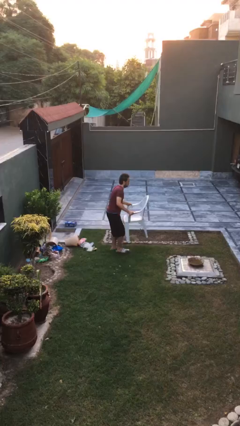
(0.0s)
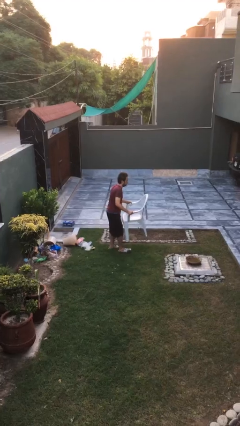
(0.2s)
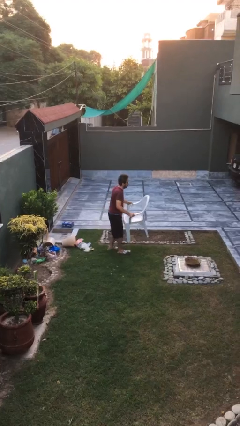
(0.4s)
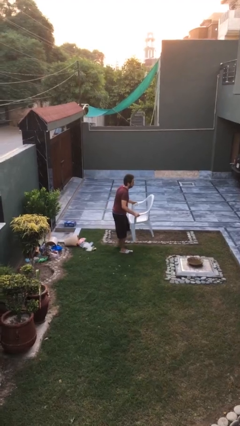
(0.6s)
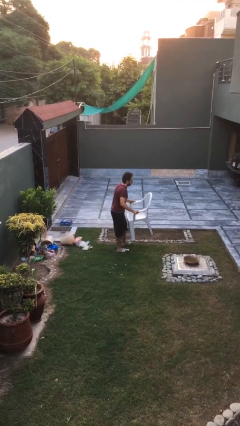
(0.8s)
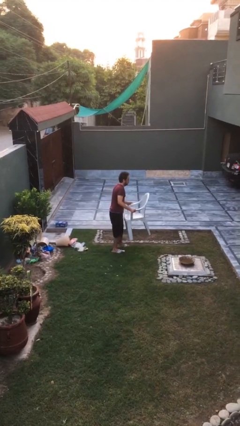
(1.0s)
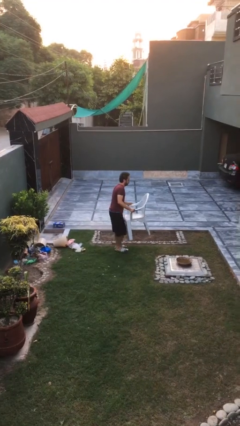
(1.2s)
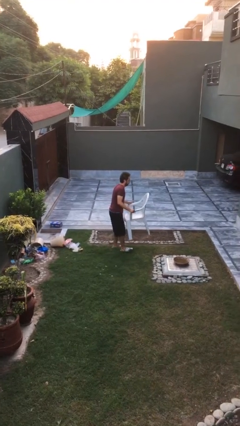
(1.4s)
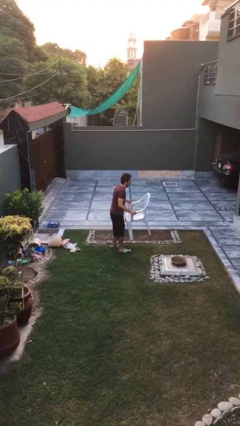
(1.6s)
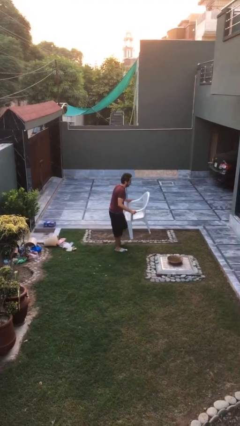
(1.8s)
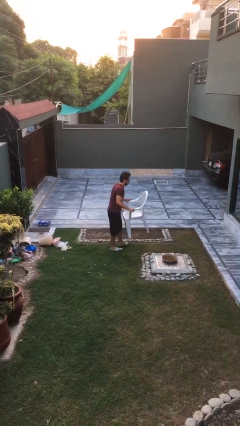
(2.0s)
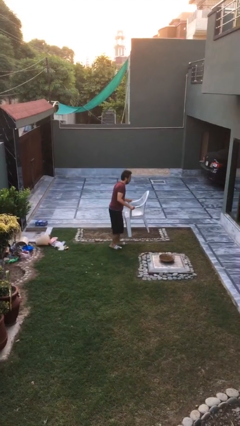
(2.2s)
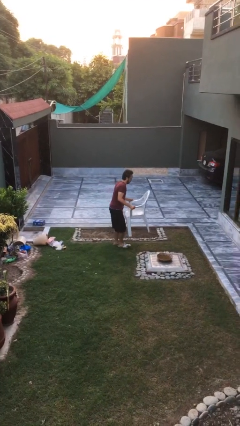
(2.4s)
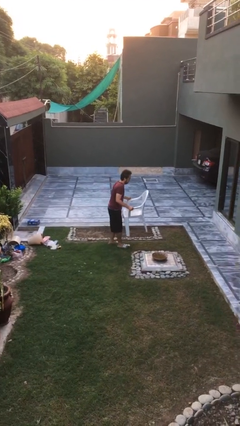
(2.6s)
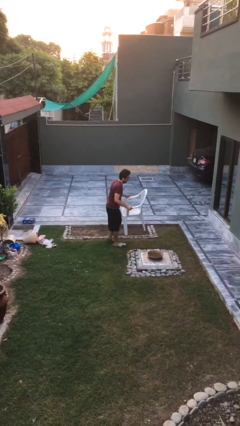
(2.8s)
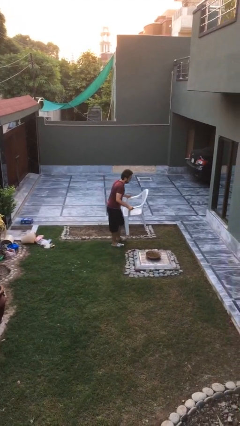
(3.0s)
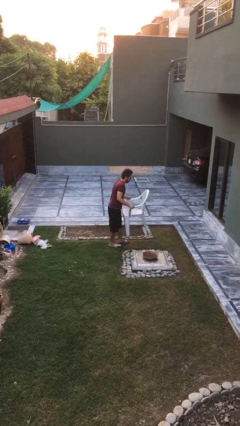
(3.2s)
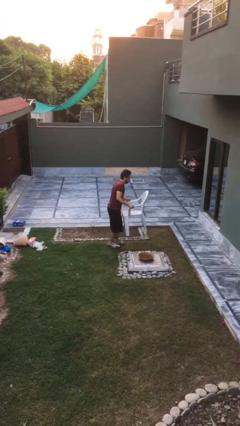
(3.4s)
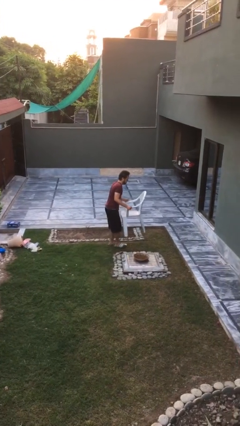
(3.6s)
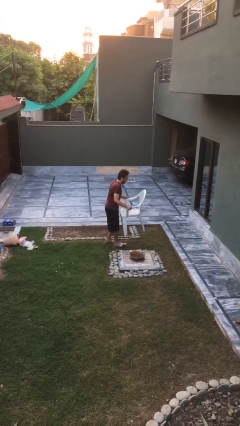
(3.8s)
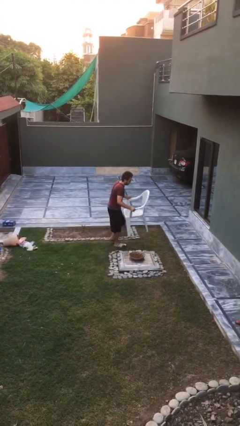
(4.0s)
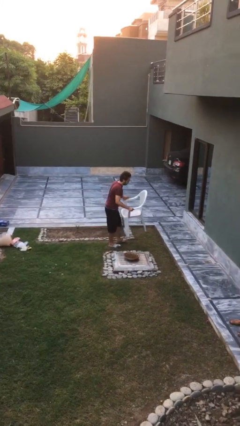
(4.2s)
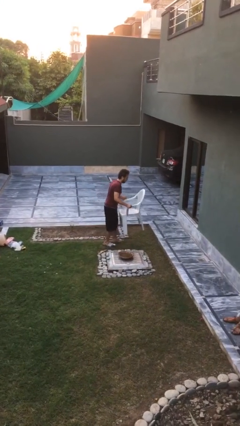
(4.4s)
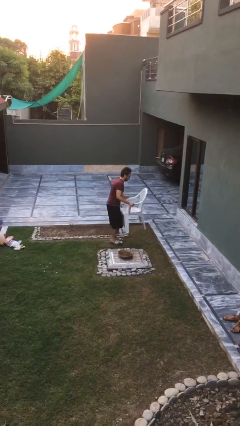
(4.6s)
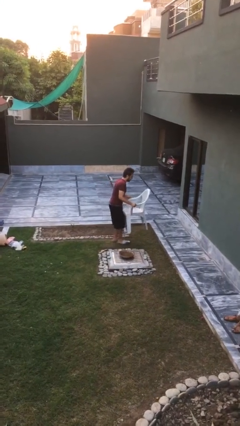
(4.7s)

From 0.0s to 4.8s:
person carries heavy object

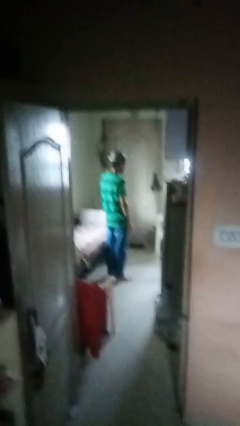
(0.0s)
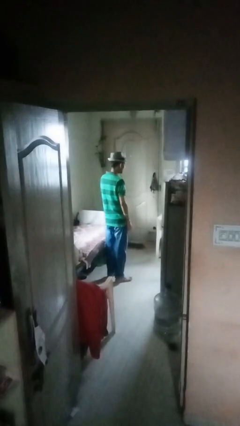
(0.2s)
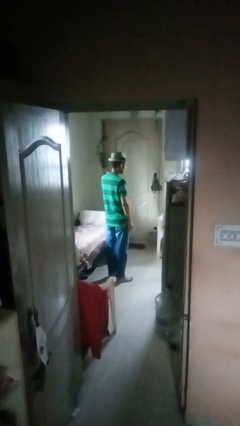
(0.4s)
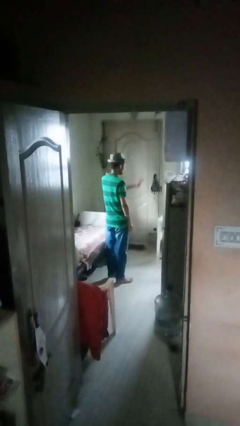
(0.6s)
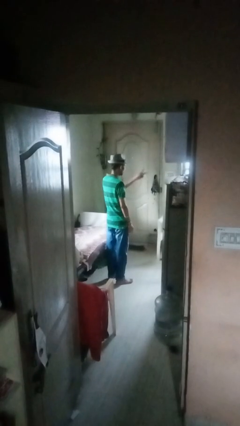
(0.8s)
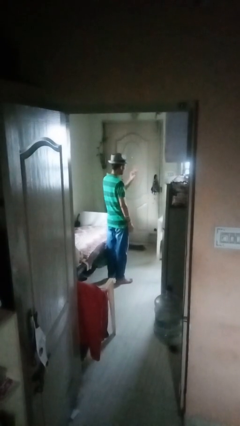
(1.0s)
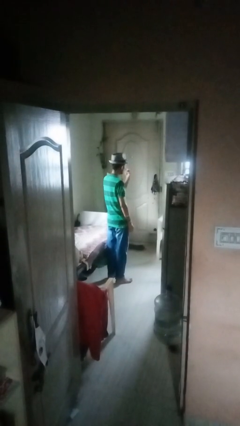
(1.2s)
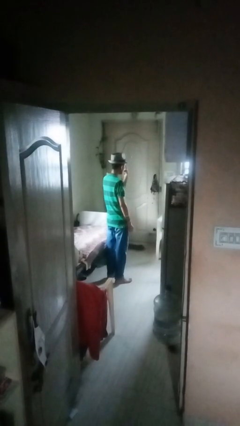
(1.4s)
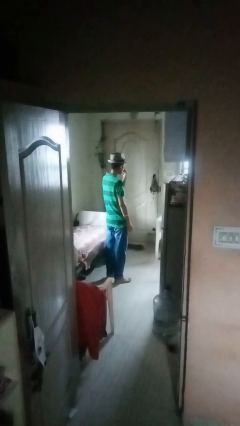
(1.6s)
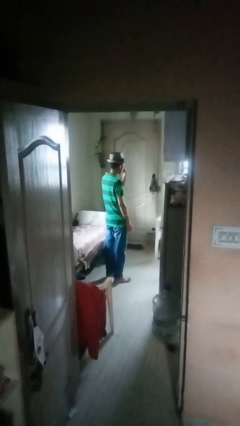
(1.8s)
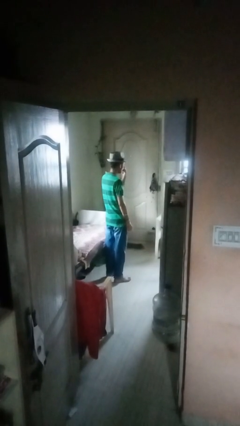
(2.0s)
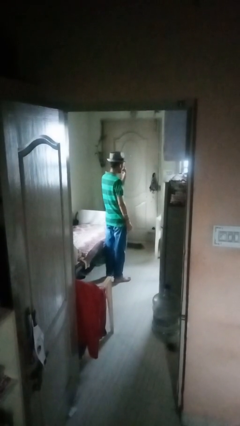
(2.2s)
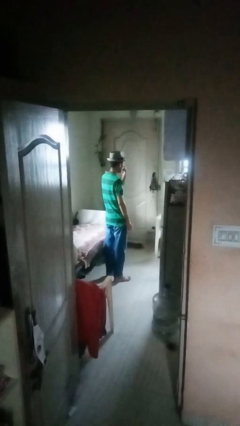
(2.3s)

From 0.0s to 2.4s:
person gestures watch closely

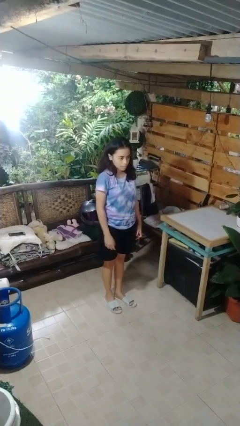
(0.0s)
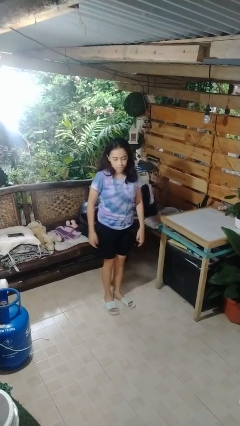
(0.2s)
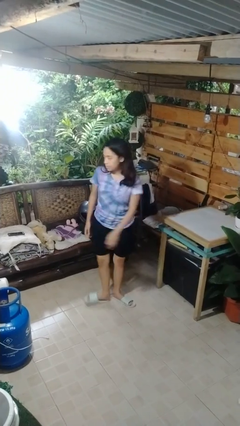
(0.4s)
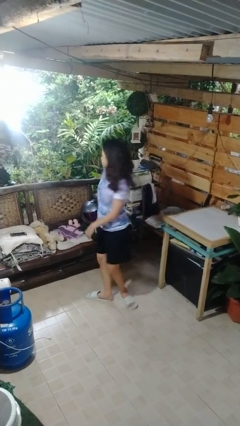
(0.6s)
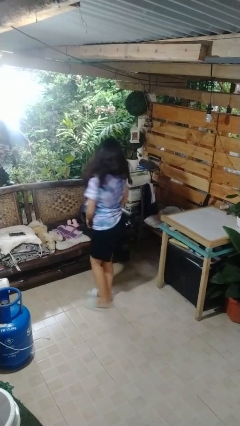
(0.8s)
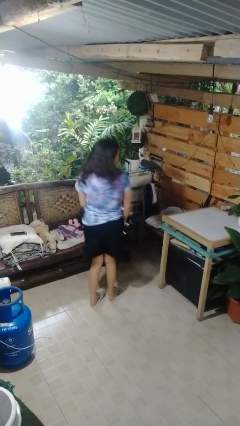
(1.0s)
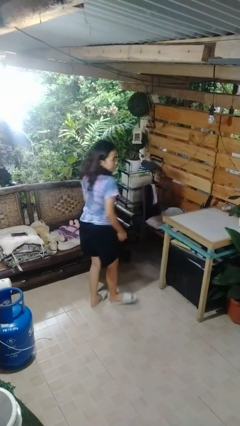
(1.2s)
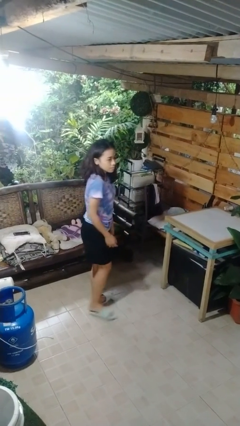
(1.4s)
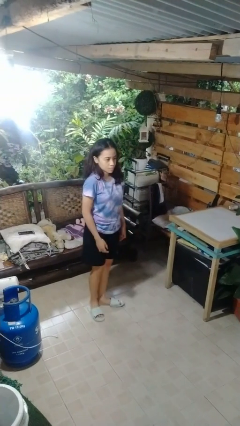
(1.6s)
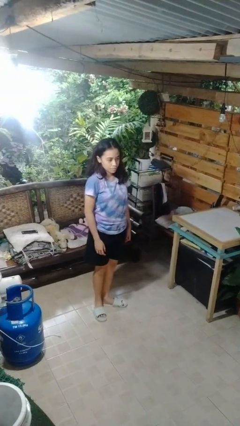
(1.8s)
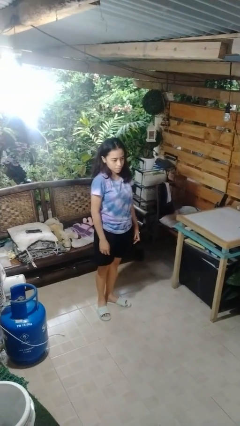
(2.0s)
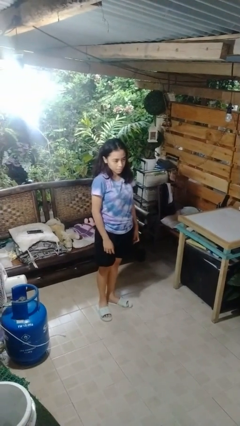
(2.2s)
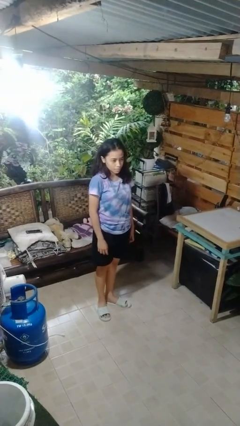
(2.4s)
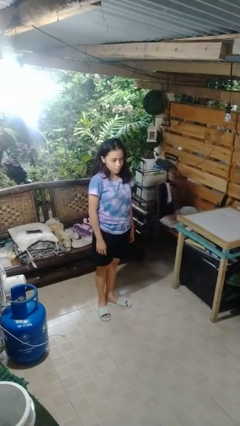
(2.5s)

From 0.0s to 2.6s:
person twirls

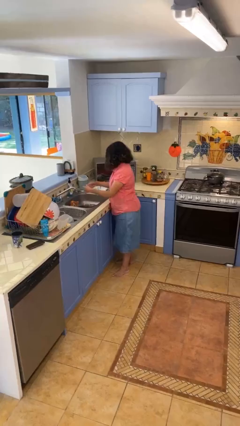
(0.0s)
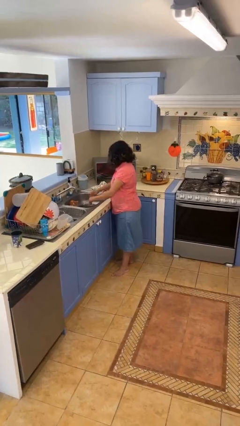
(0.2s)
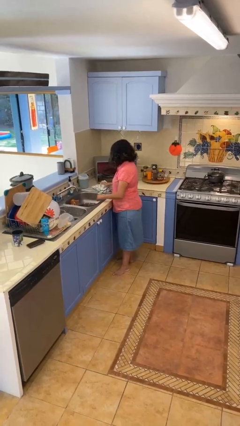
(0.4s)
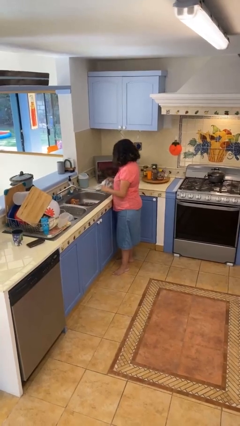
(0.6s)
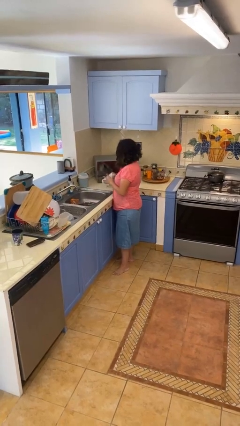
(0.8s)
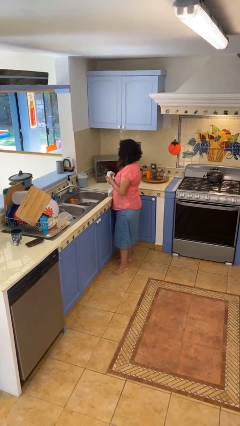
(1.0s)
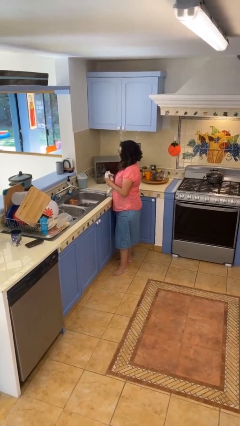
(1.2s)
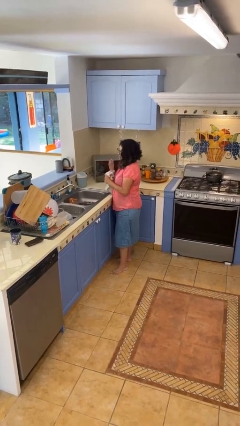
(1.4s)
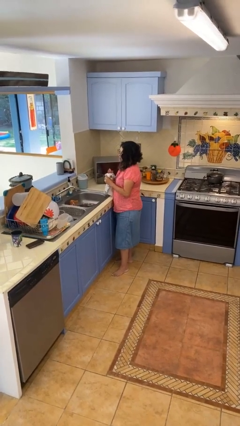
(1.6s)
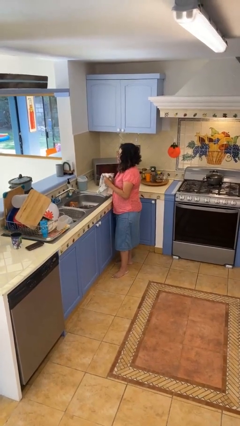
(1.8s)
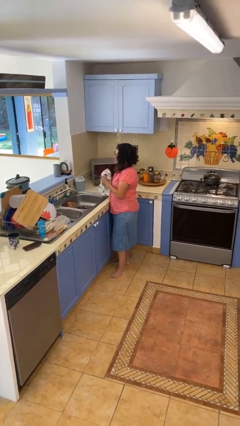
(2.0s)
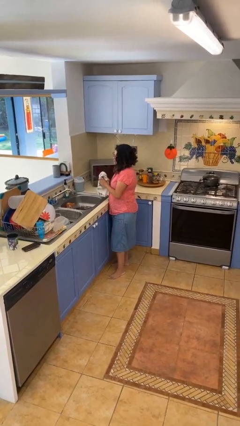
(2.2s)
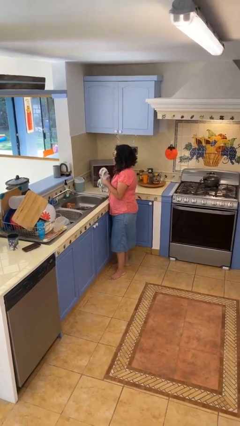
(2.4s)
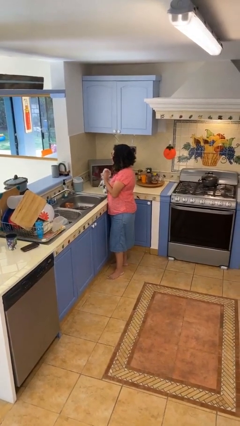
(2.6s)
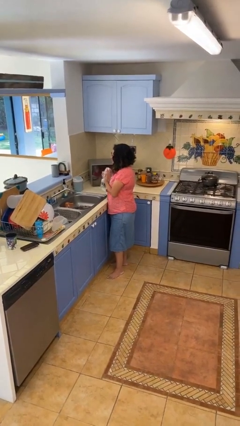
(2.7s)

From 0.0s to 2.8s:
person dries hands with towel

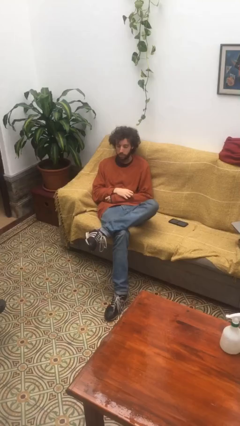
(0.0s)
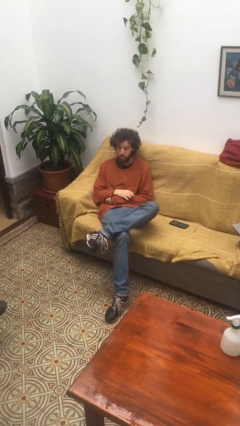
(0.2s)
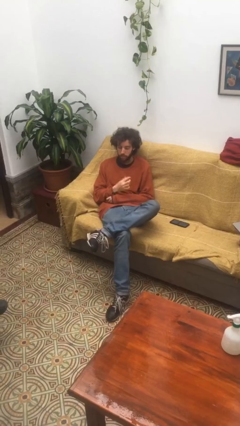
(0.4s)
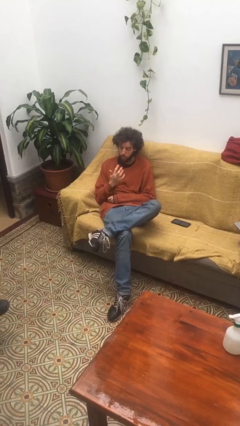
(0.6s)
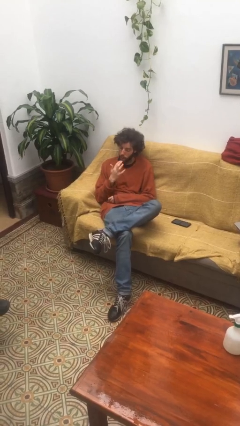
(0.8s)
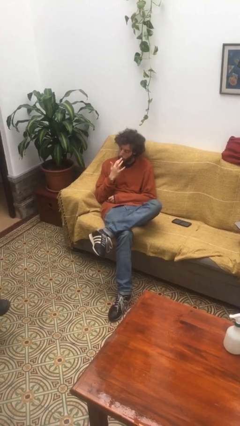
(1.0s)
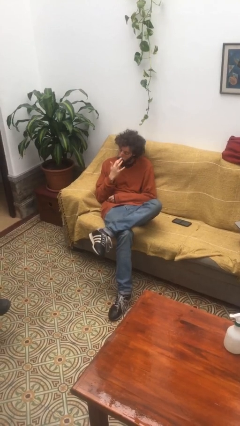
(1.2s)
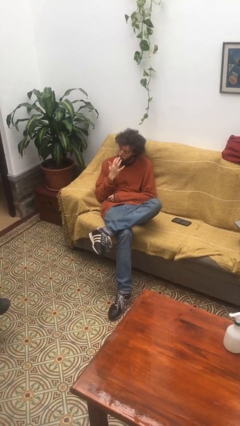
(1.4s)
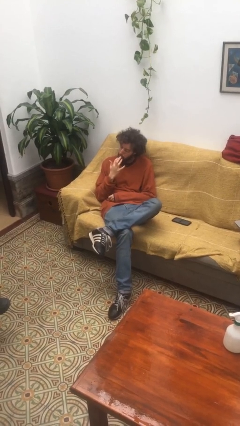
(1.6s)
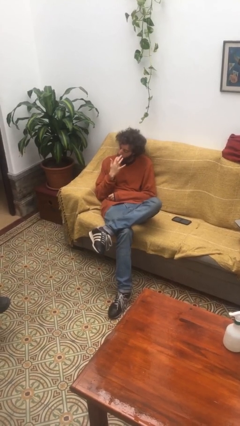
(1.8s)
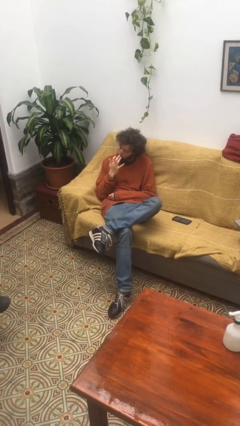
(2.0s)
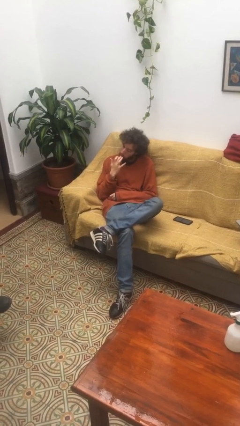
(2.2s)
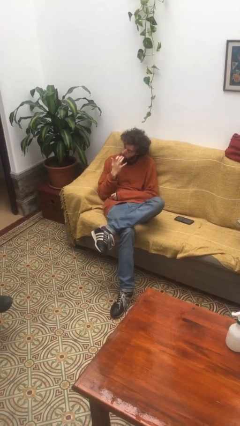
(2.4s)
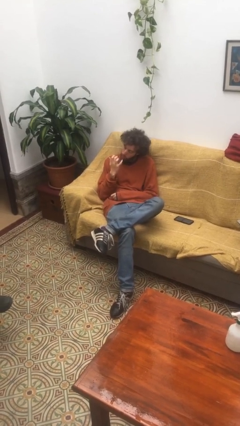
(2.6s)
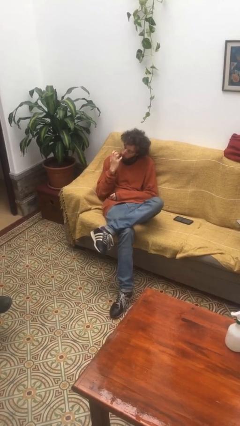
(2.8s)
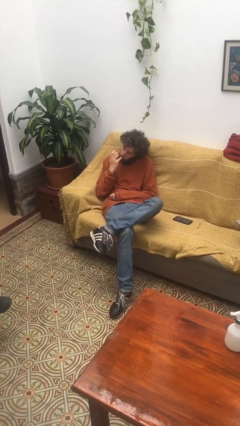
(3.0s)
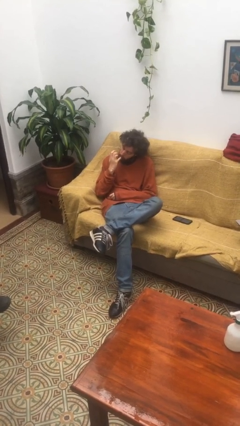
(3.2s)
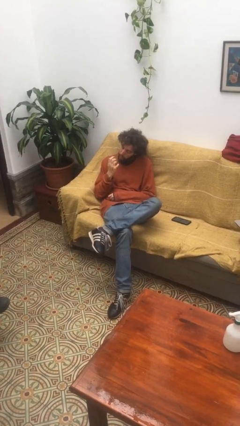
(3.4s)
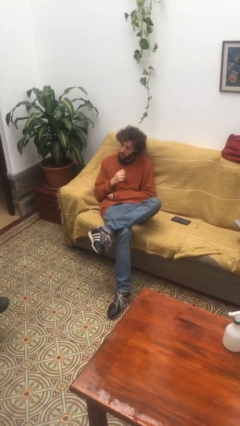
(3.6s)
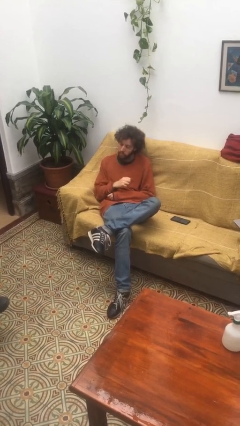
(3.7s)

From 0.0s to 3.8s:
person licks fingers

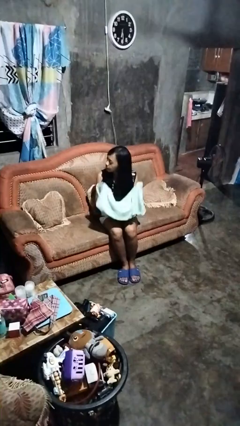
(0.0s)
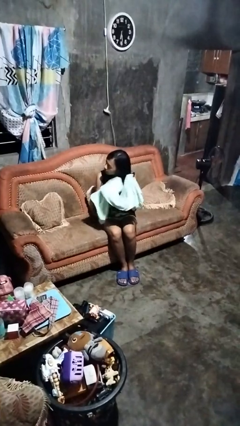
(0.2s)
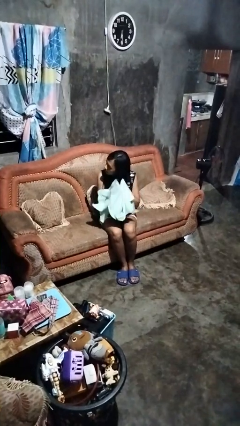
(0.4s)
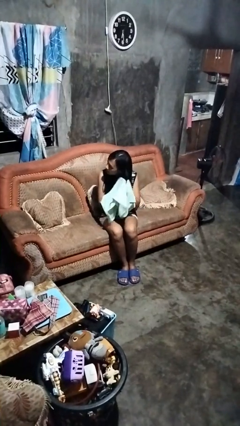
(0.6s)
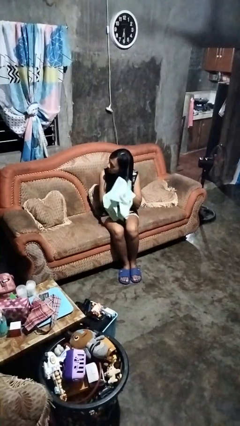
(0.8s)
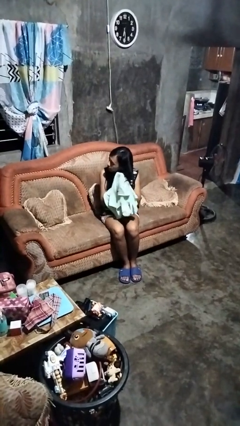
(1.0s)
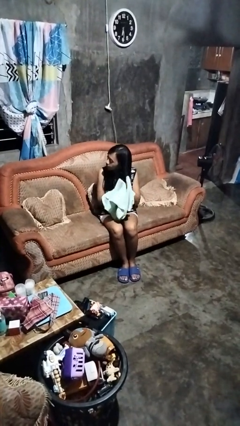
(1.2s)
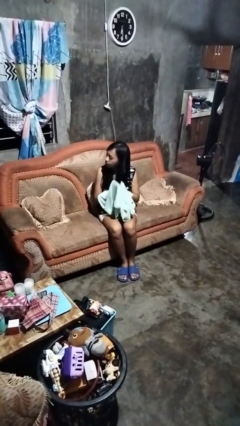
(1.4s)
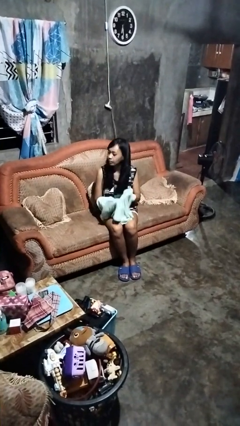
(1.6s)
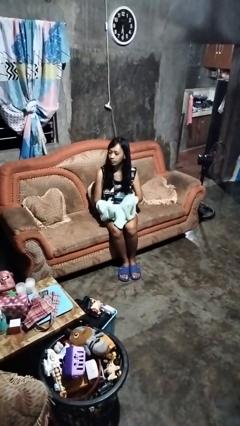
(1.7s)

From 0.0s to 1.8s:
person dries hair with towel
